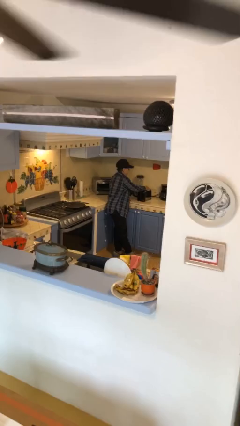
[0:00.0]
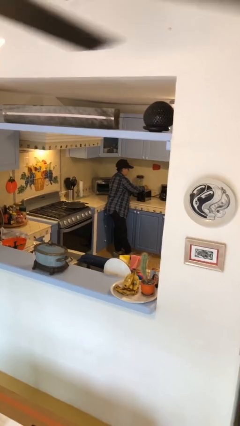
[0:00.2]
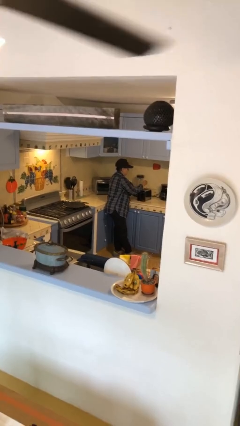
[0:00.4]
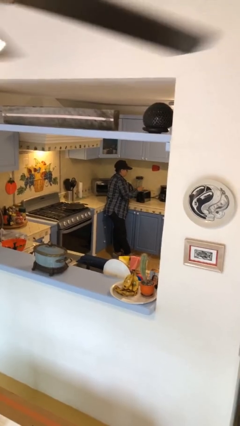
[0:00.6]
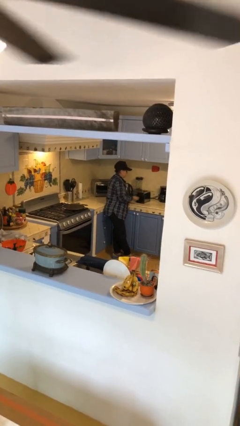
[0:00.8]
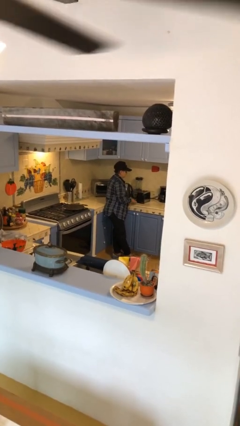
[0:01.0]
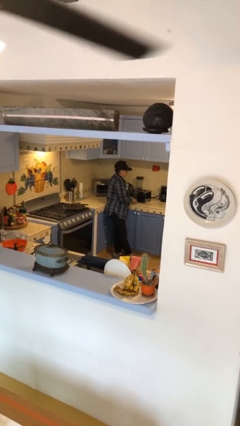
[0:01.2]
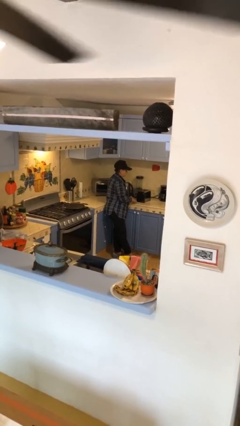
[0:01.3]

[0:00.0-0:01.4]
person takes object from toaster

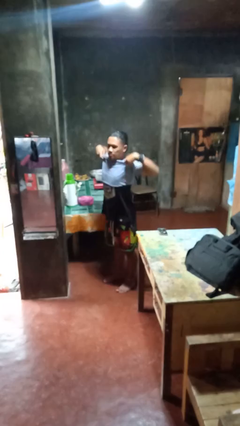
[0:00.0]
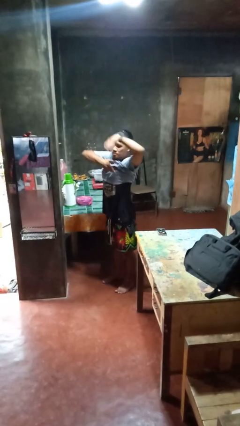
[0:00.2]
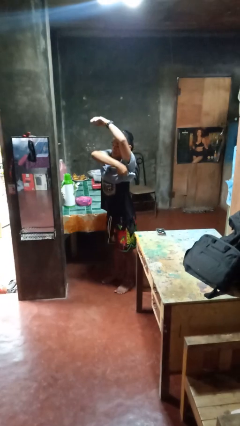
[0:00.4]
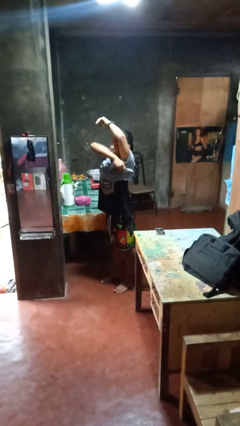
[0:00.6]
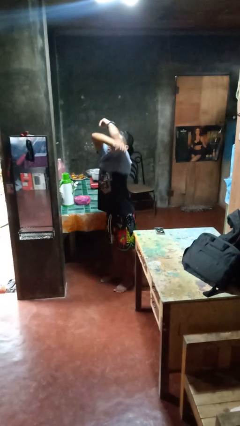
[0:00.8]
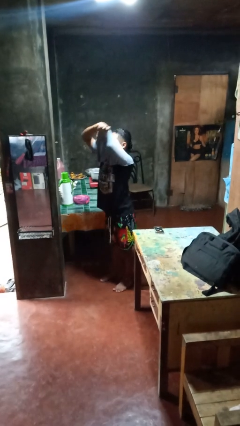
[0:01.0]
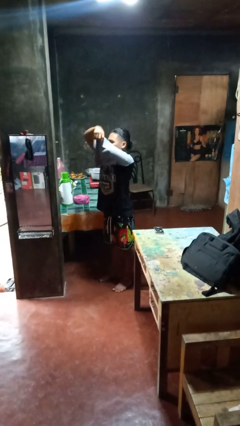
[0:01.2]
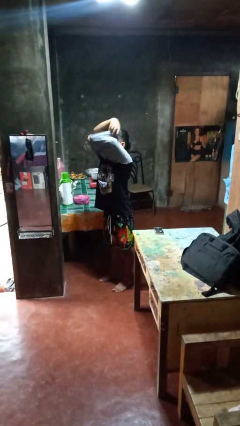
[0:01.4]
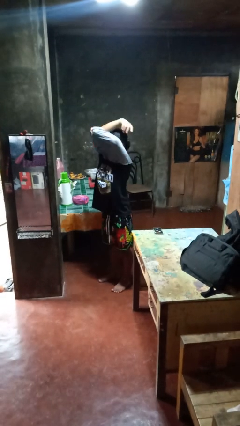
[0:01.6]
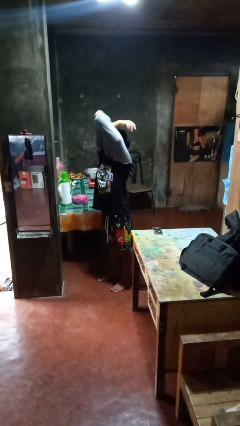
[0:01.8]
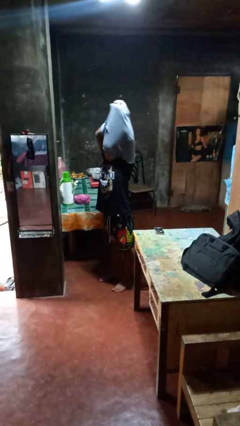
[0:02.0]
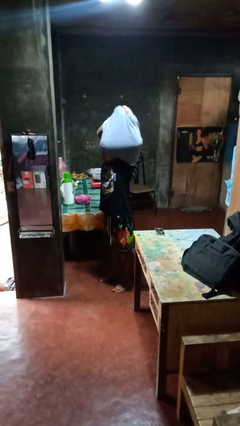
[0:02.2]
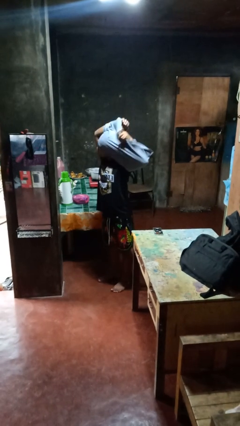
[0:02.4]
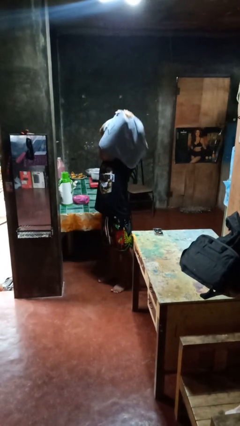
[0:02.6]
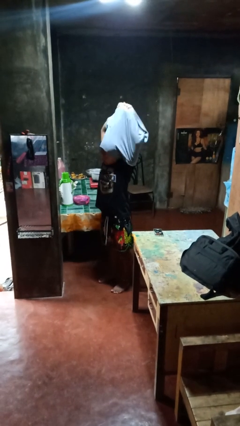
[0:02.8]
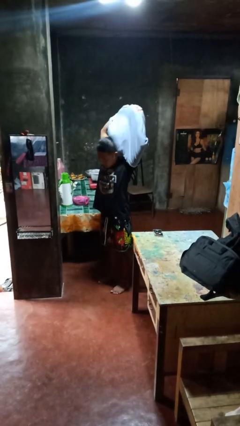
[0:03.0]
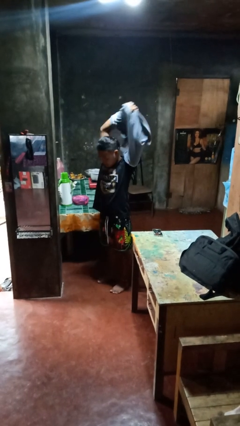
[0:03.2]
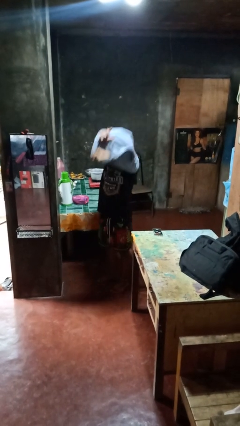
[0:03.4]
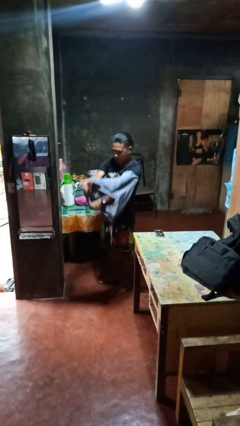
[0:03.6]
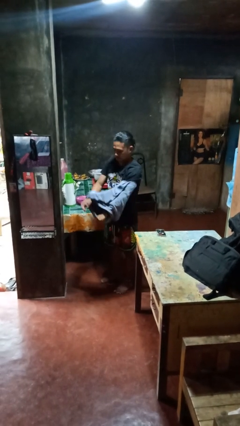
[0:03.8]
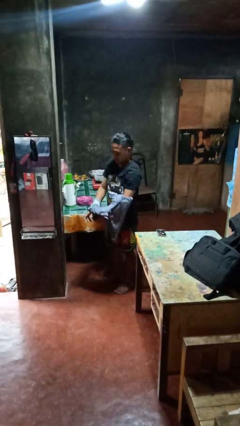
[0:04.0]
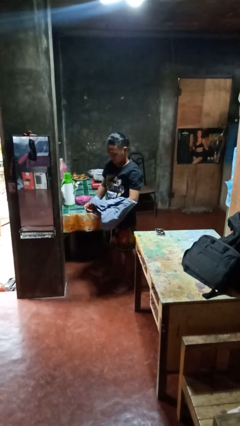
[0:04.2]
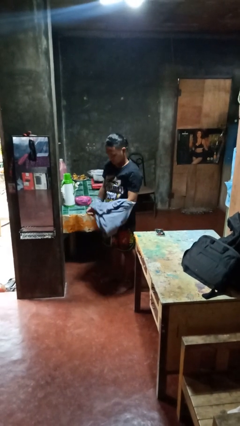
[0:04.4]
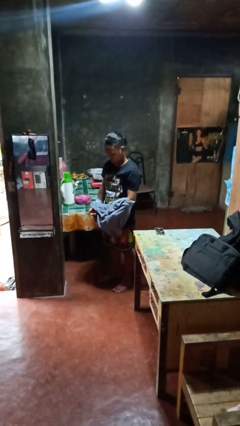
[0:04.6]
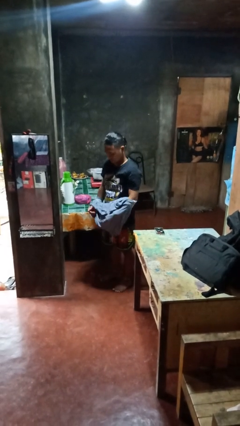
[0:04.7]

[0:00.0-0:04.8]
person takes off shirt

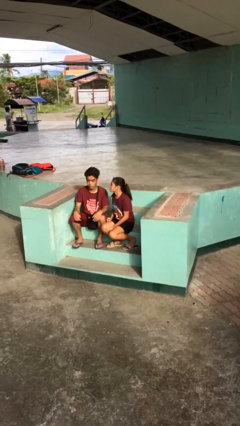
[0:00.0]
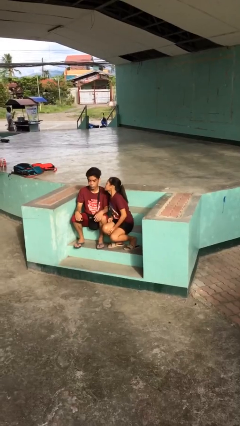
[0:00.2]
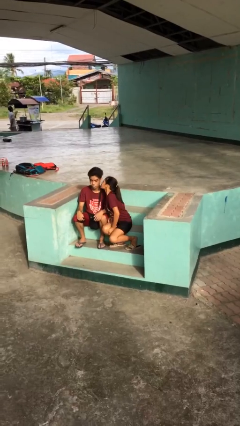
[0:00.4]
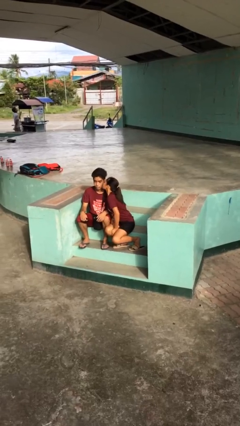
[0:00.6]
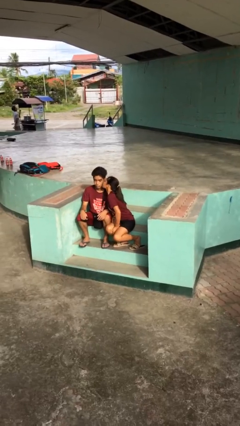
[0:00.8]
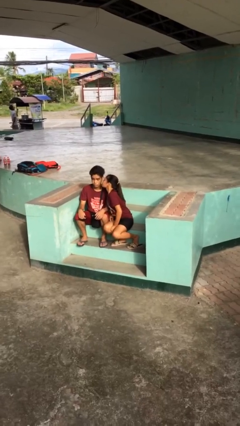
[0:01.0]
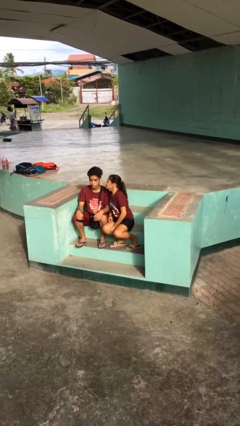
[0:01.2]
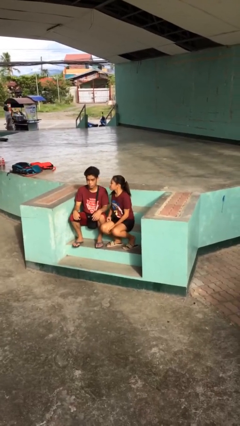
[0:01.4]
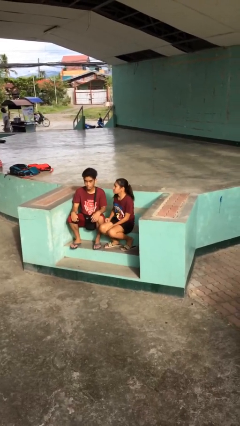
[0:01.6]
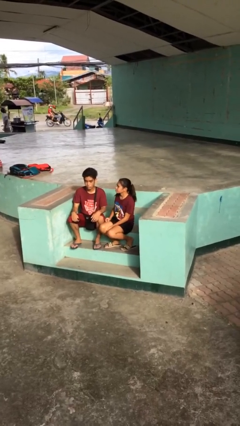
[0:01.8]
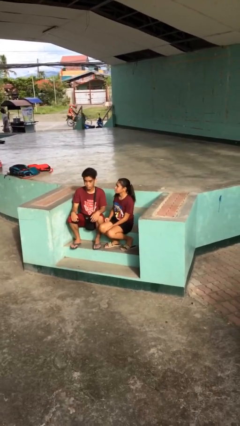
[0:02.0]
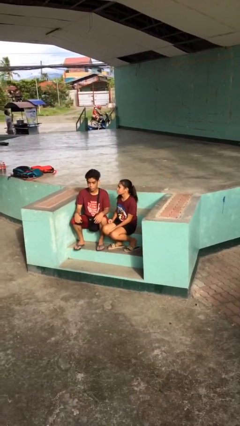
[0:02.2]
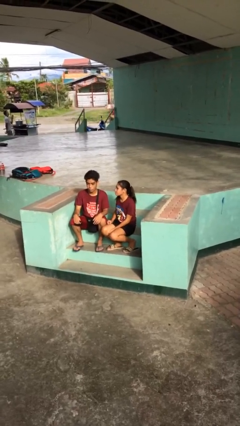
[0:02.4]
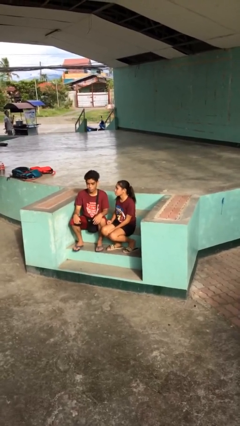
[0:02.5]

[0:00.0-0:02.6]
person kisses cheek of person

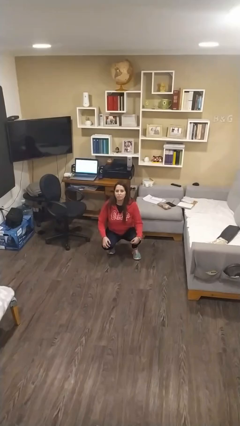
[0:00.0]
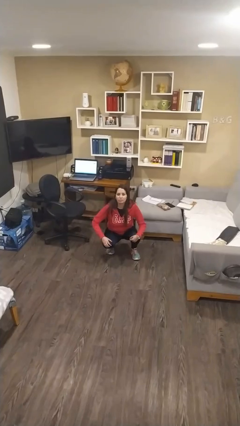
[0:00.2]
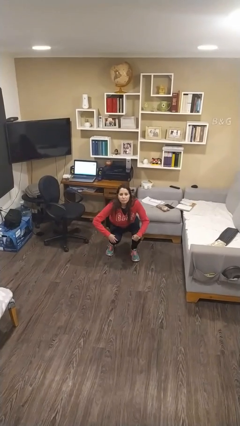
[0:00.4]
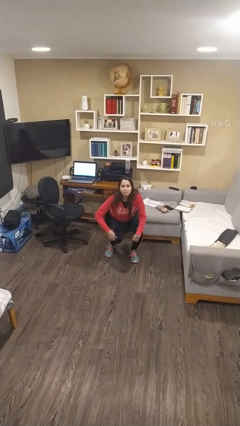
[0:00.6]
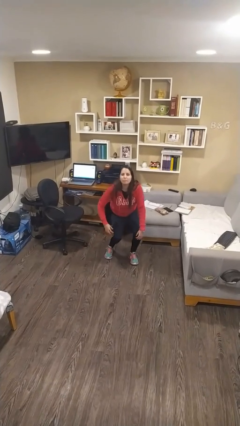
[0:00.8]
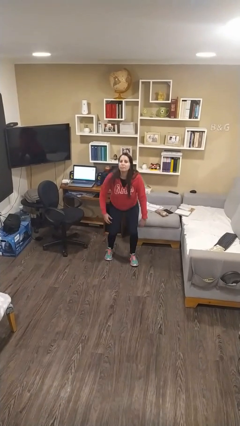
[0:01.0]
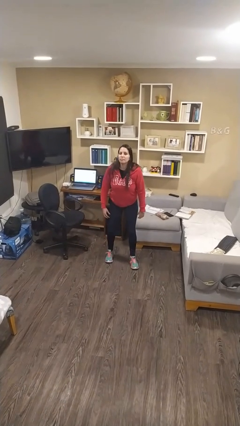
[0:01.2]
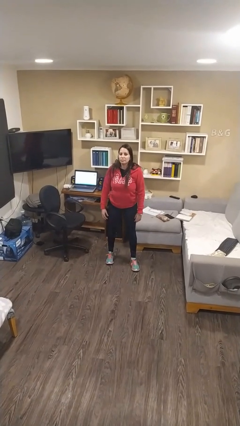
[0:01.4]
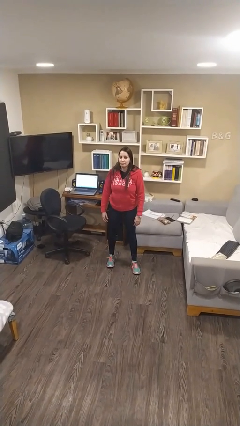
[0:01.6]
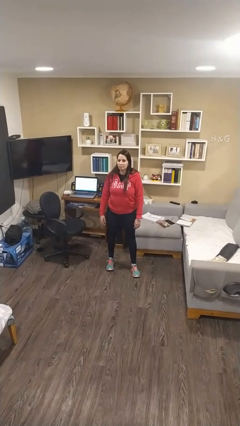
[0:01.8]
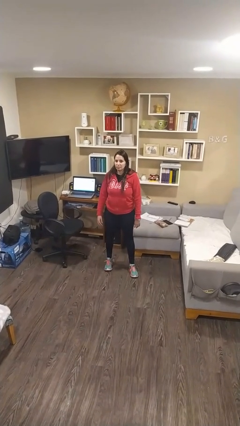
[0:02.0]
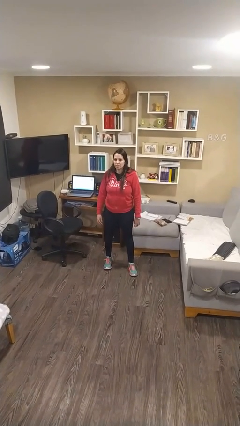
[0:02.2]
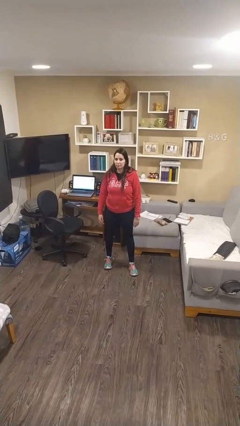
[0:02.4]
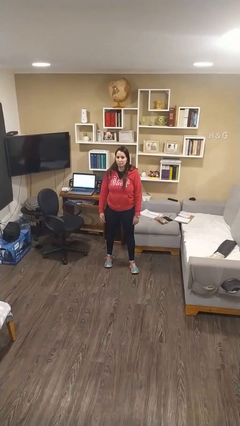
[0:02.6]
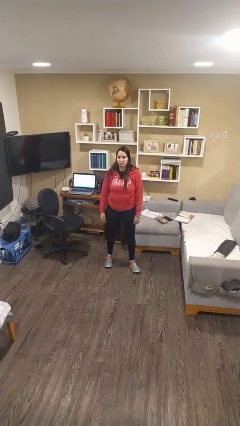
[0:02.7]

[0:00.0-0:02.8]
person stands up

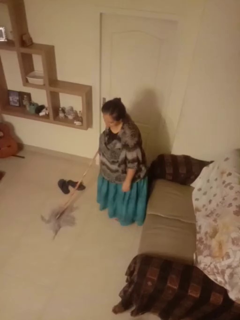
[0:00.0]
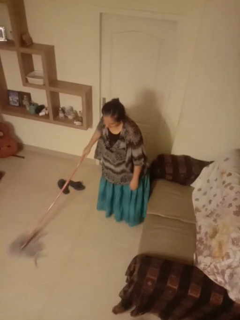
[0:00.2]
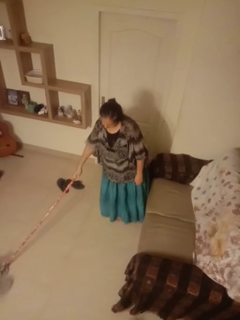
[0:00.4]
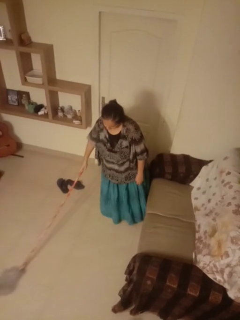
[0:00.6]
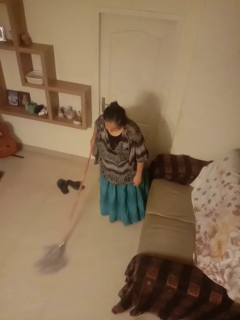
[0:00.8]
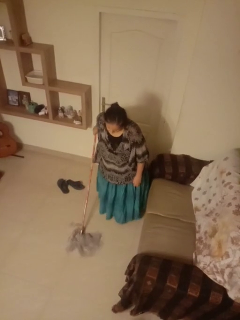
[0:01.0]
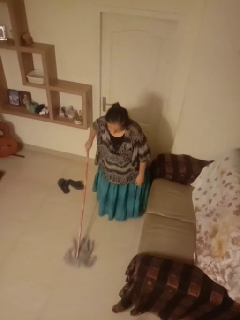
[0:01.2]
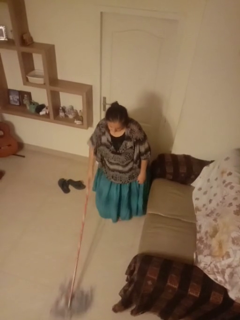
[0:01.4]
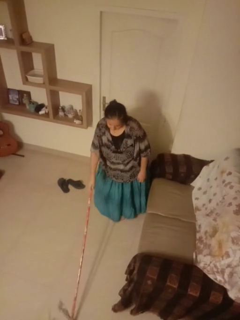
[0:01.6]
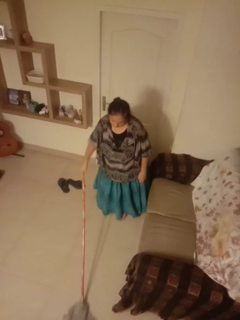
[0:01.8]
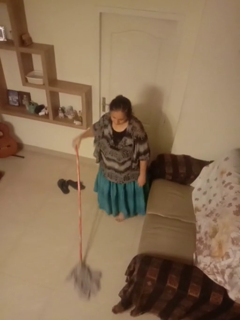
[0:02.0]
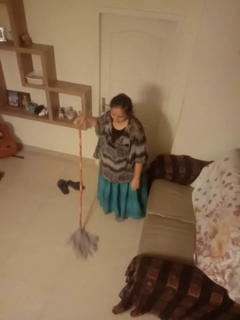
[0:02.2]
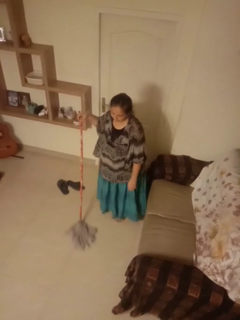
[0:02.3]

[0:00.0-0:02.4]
person mops

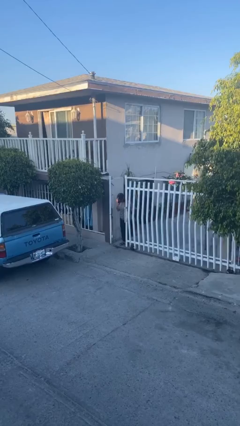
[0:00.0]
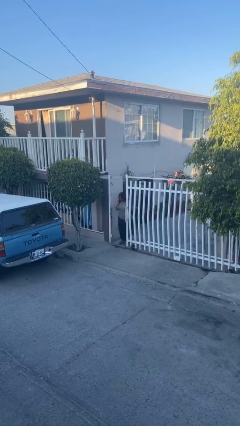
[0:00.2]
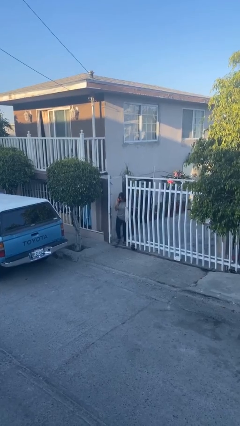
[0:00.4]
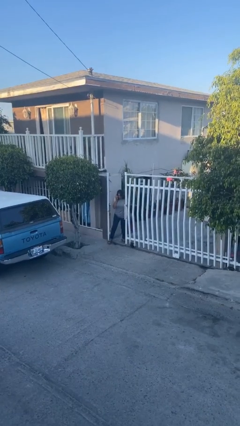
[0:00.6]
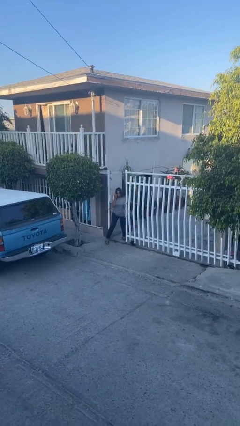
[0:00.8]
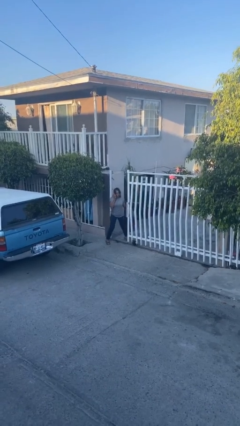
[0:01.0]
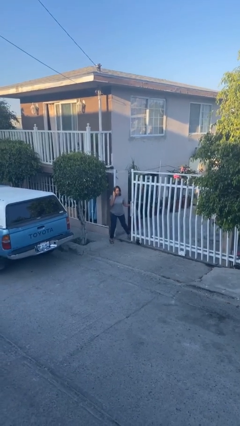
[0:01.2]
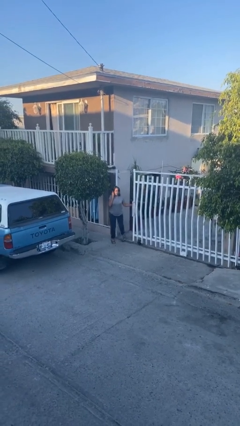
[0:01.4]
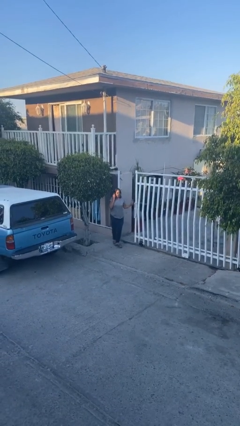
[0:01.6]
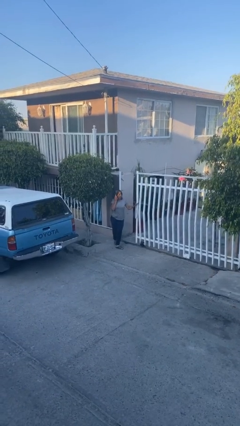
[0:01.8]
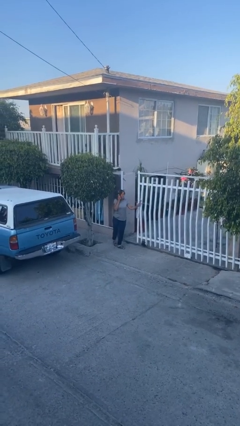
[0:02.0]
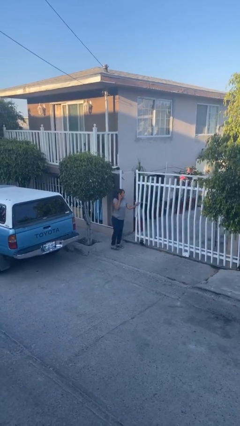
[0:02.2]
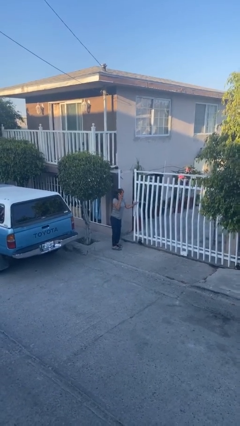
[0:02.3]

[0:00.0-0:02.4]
person enters scene through structure

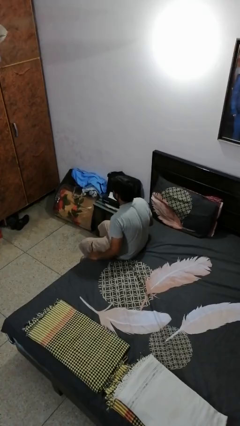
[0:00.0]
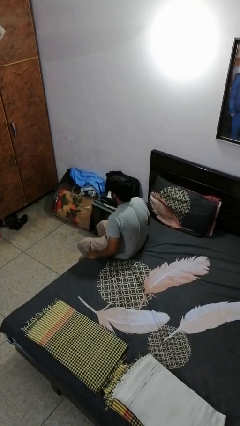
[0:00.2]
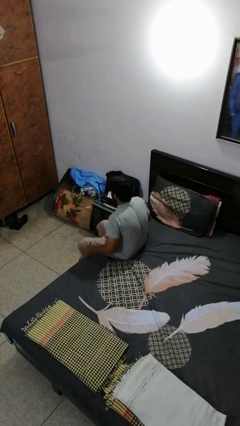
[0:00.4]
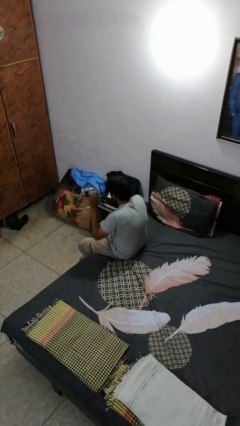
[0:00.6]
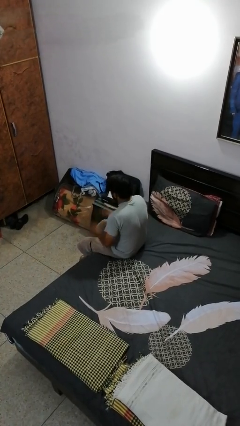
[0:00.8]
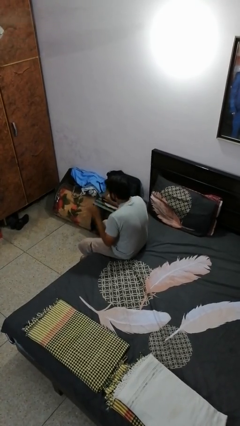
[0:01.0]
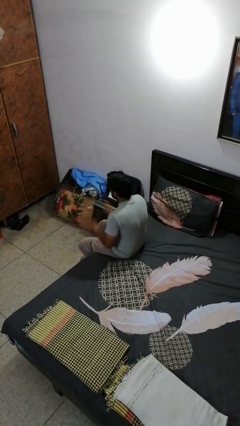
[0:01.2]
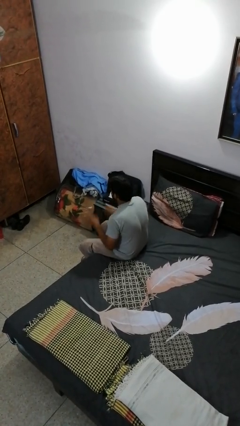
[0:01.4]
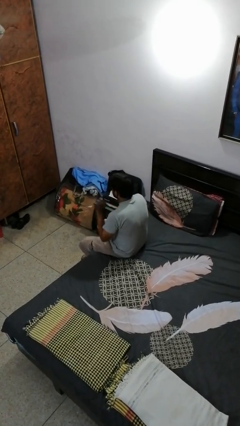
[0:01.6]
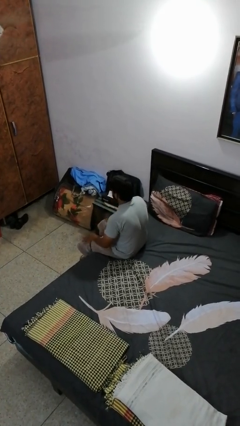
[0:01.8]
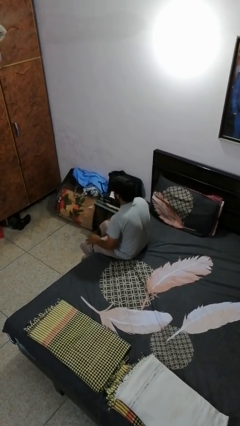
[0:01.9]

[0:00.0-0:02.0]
person slaps hands on thighs
